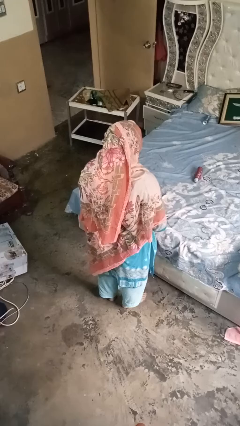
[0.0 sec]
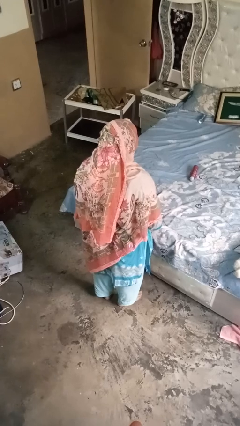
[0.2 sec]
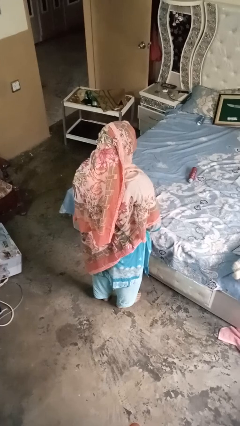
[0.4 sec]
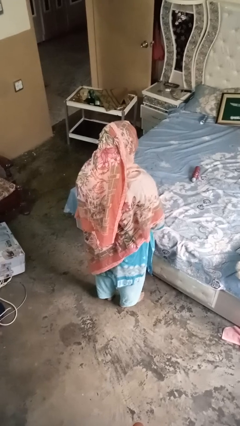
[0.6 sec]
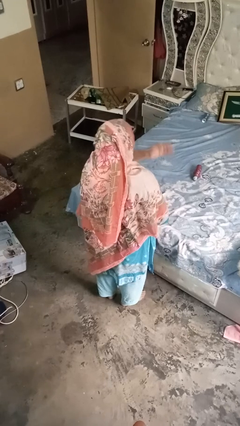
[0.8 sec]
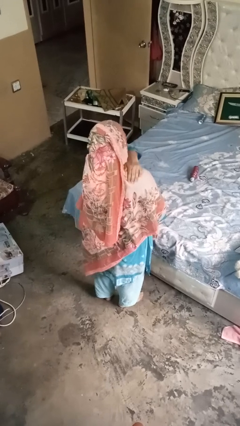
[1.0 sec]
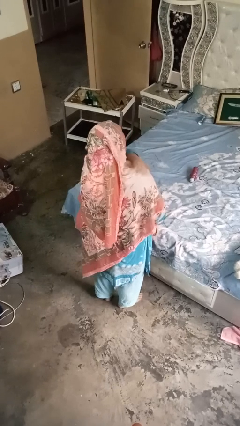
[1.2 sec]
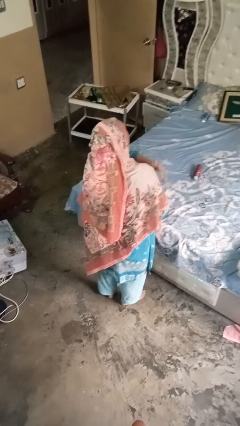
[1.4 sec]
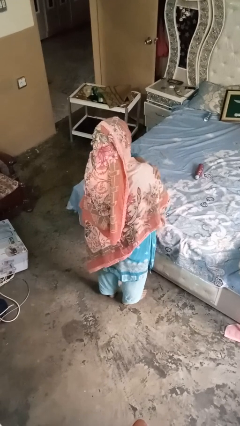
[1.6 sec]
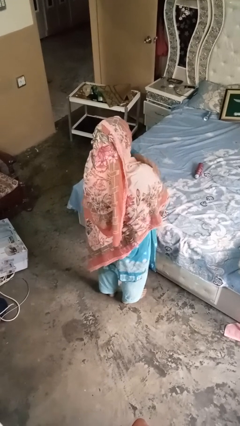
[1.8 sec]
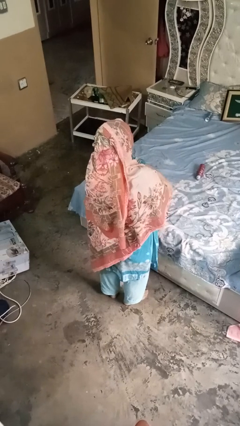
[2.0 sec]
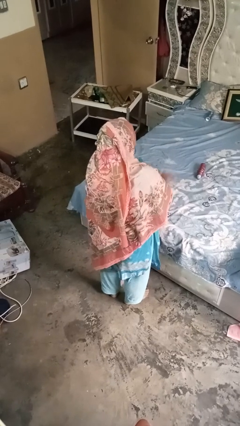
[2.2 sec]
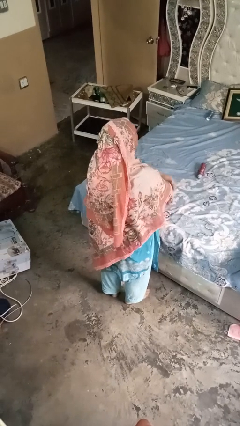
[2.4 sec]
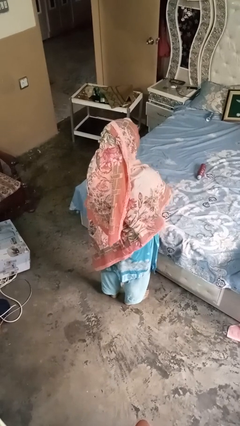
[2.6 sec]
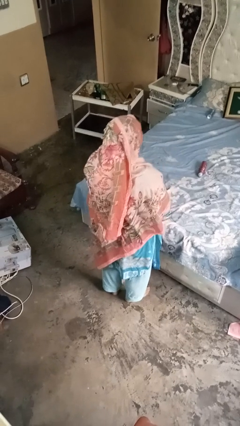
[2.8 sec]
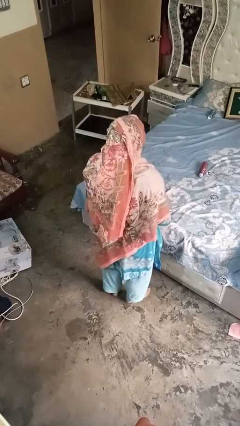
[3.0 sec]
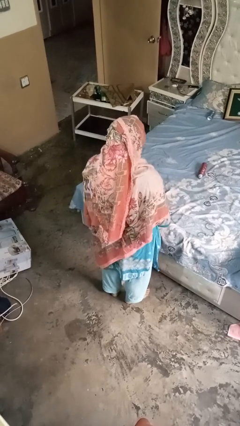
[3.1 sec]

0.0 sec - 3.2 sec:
person swats bug

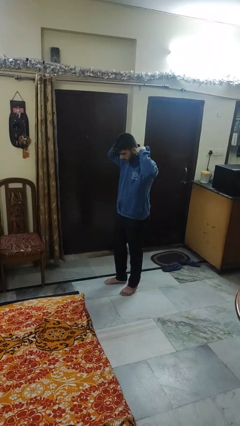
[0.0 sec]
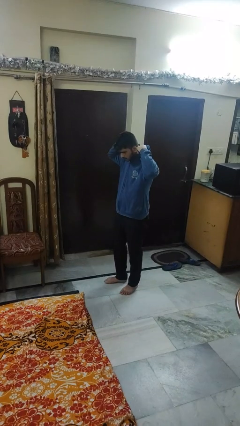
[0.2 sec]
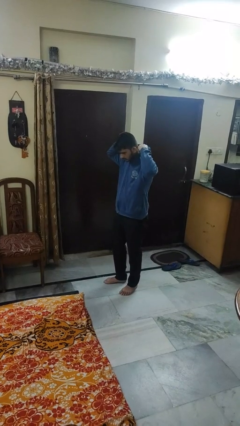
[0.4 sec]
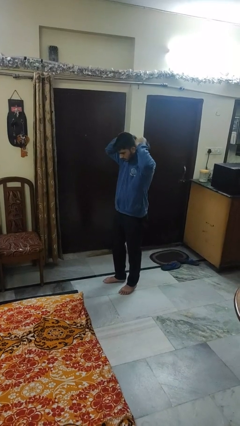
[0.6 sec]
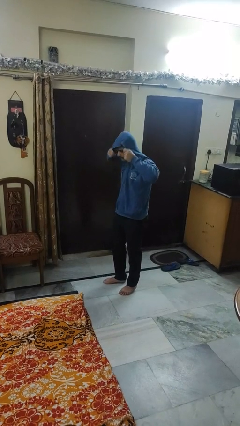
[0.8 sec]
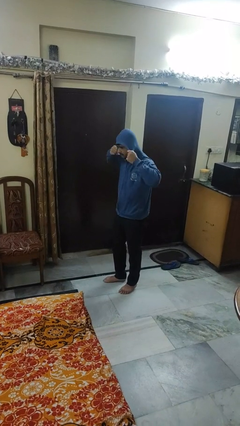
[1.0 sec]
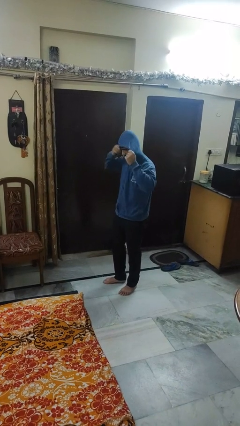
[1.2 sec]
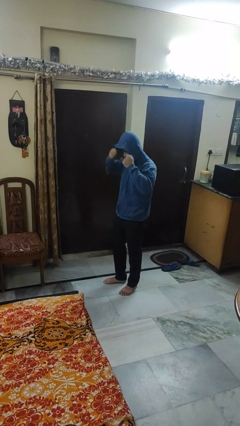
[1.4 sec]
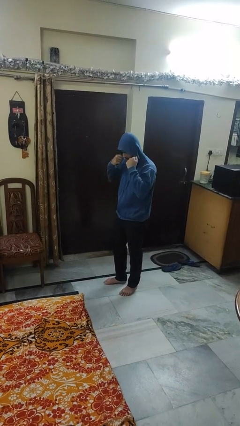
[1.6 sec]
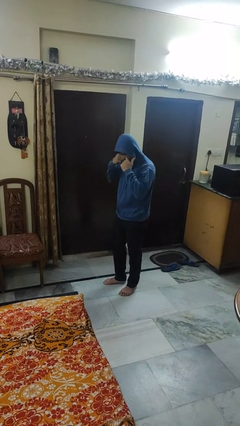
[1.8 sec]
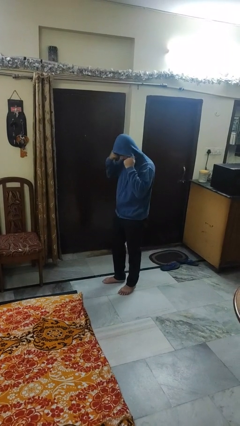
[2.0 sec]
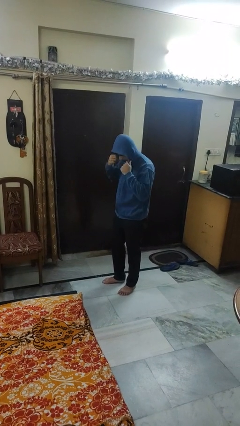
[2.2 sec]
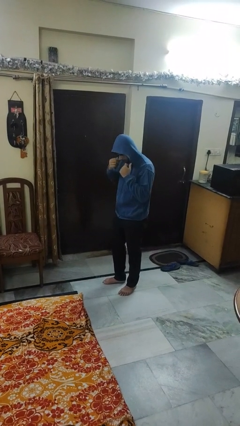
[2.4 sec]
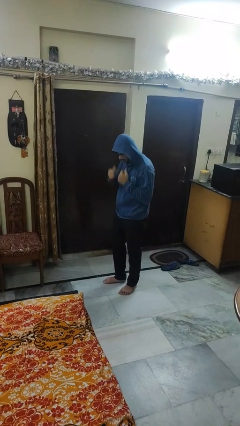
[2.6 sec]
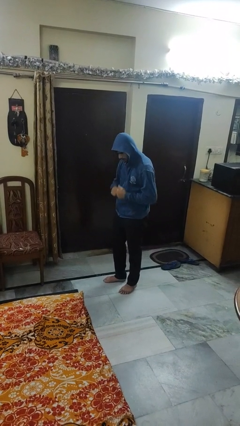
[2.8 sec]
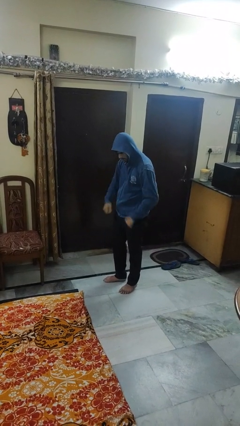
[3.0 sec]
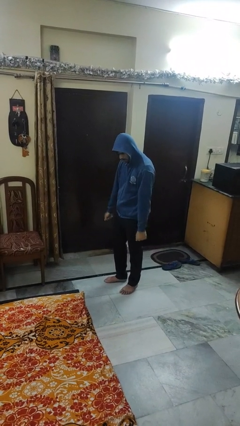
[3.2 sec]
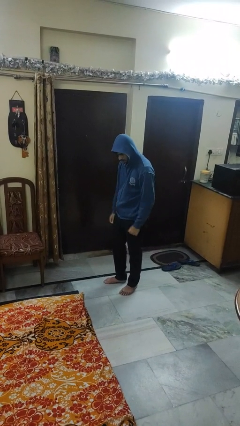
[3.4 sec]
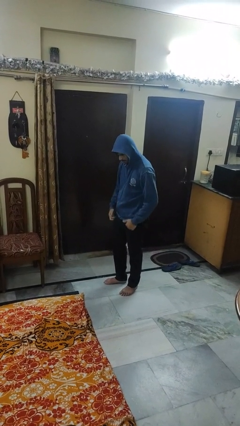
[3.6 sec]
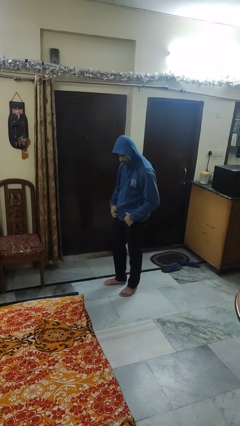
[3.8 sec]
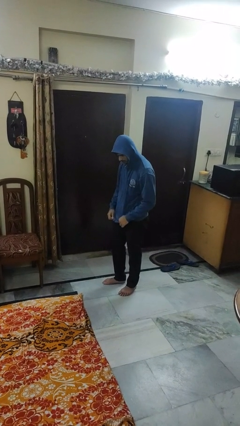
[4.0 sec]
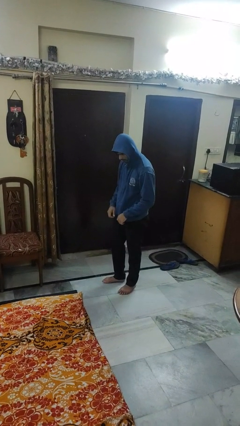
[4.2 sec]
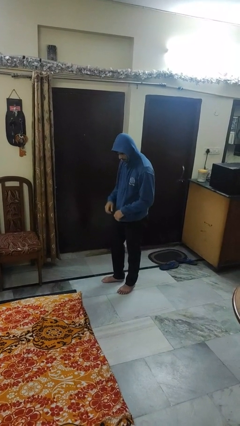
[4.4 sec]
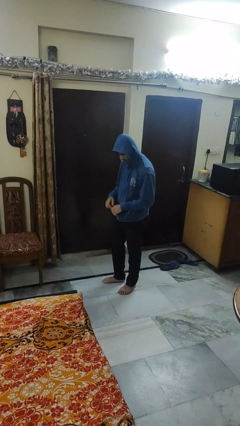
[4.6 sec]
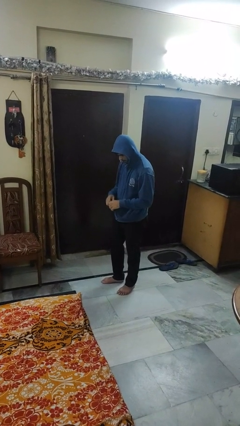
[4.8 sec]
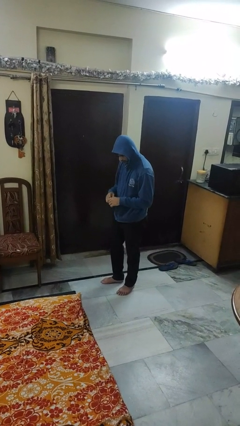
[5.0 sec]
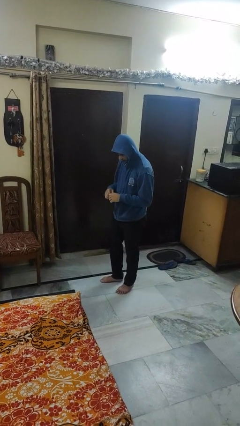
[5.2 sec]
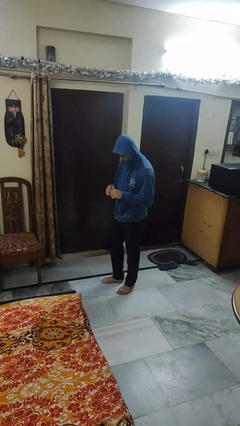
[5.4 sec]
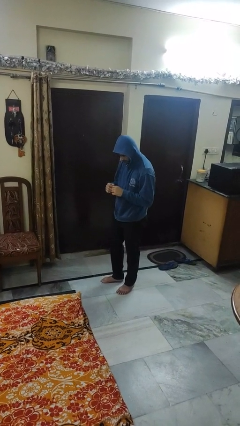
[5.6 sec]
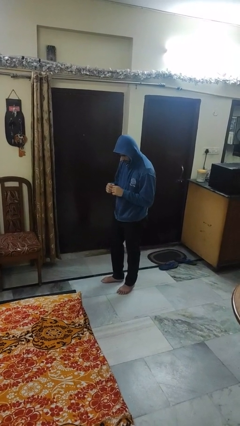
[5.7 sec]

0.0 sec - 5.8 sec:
person puts on hoodie

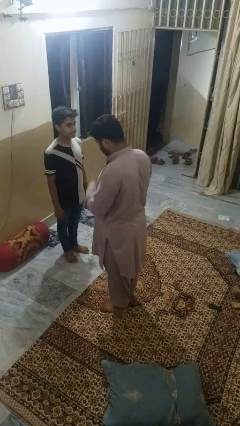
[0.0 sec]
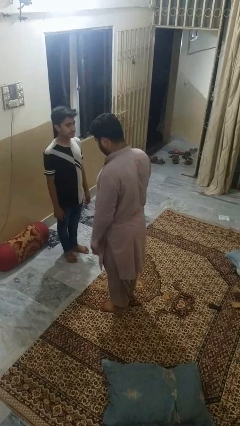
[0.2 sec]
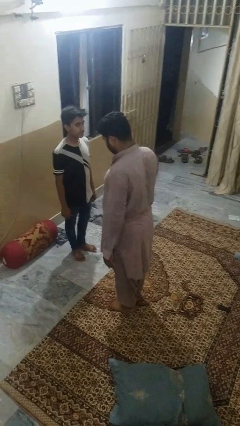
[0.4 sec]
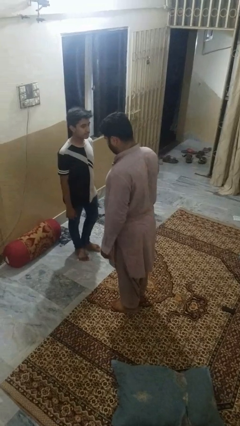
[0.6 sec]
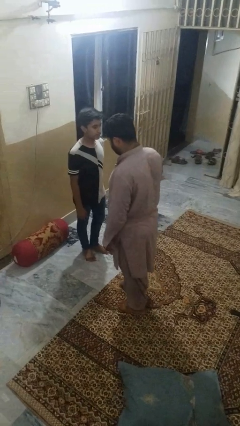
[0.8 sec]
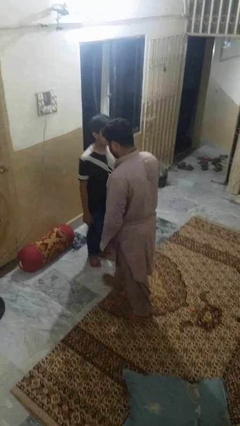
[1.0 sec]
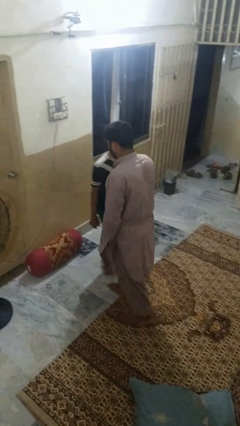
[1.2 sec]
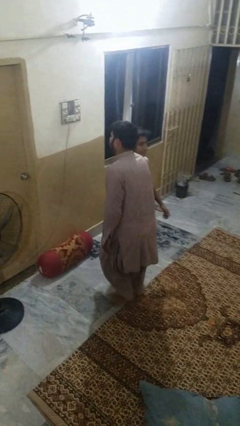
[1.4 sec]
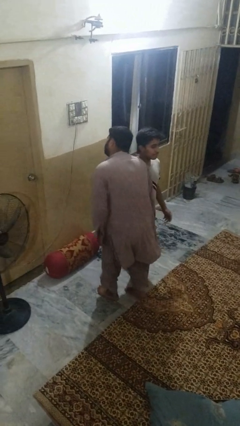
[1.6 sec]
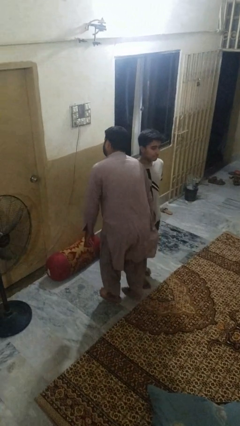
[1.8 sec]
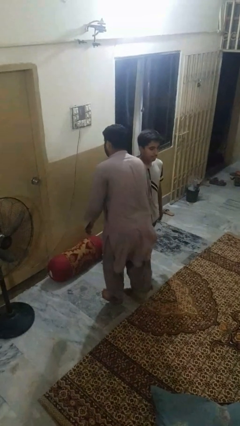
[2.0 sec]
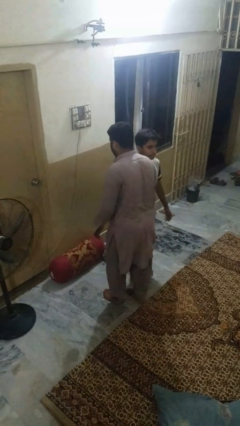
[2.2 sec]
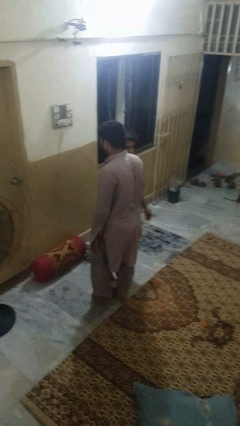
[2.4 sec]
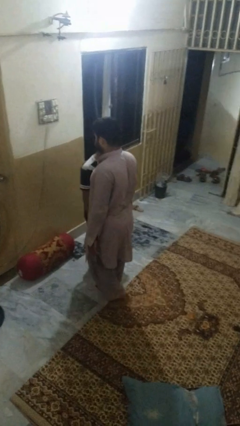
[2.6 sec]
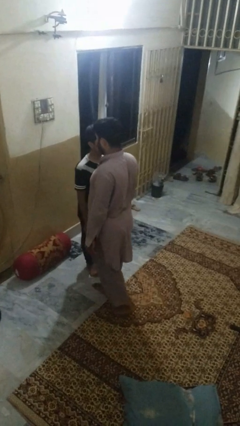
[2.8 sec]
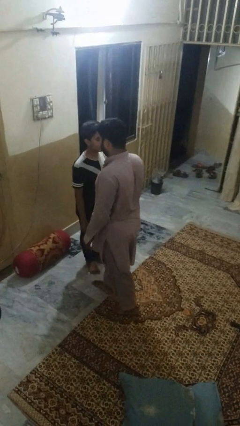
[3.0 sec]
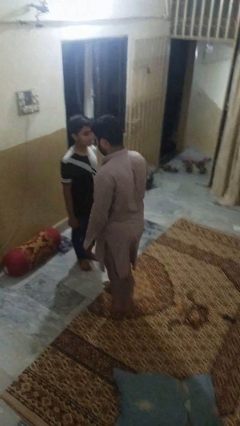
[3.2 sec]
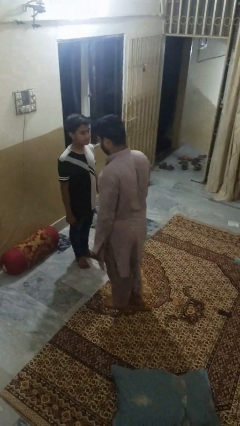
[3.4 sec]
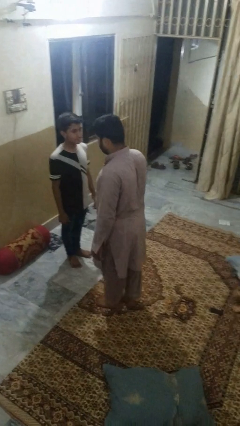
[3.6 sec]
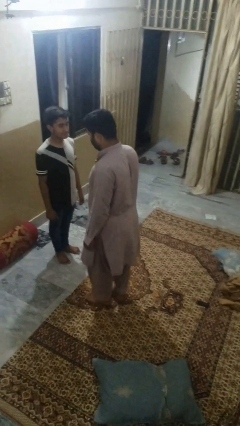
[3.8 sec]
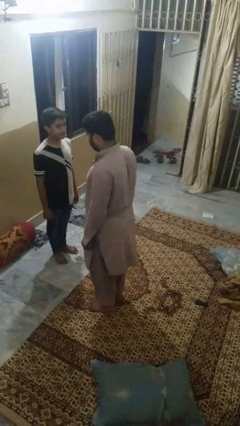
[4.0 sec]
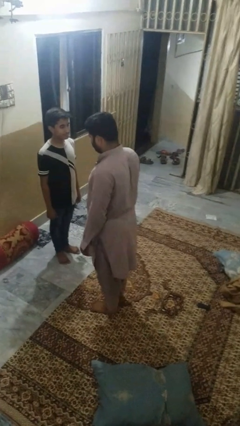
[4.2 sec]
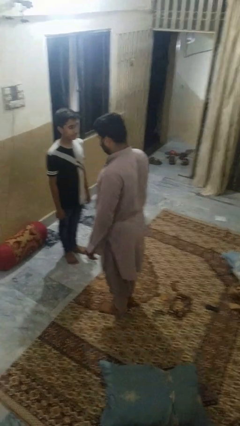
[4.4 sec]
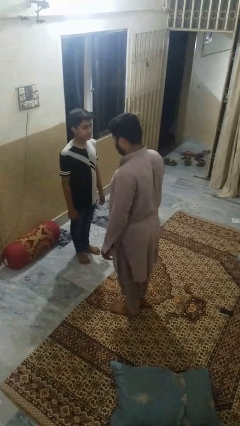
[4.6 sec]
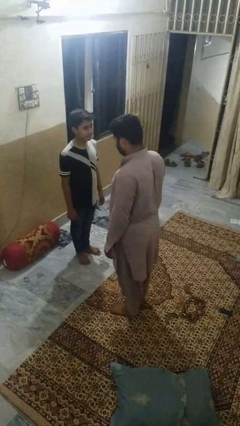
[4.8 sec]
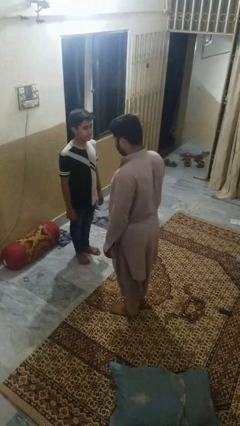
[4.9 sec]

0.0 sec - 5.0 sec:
person bumps into person

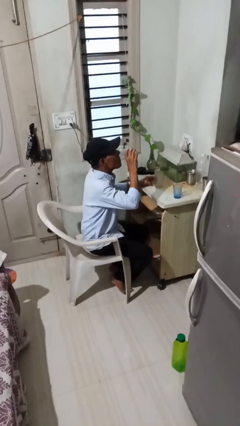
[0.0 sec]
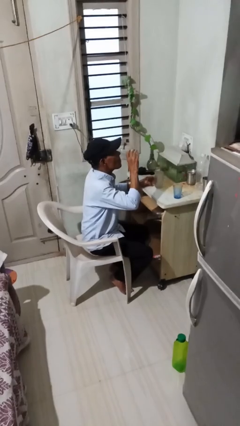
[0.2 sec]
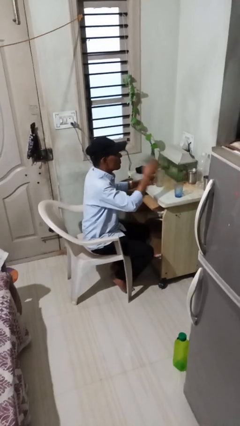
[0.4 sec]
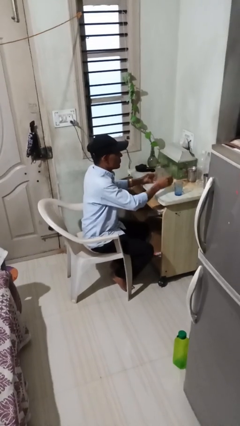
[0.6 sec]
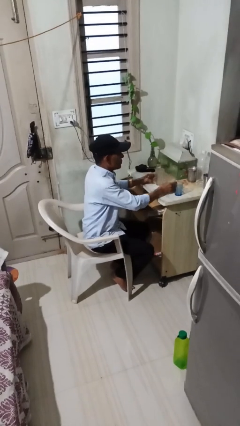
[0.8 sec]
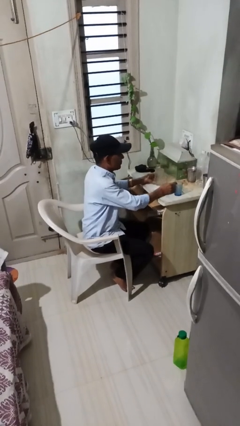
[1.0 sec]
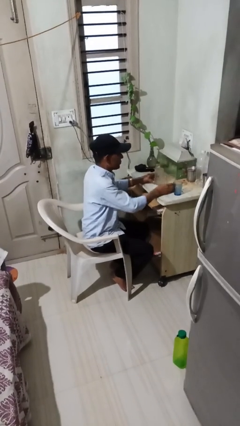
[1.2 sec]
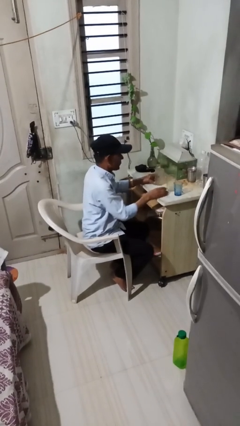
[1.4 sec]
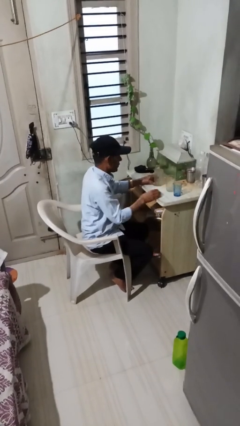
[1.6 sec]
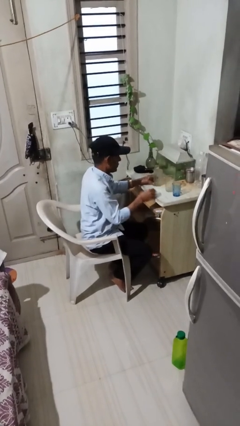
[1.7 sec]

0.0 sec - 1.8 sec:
person puts down object on table

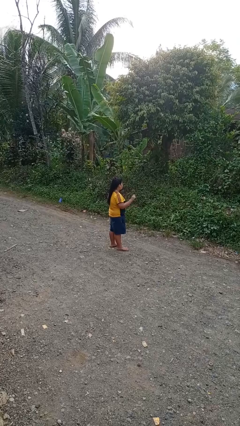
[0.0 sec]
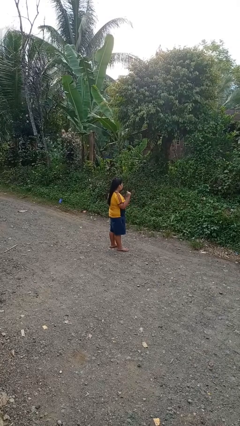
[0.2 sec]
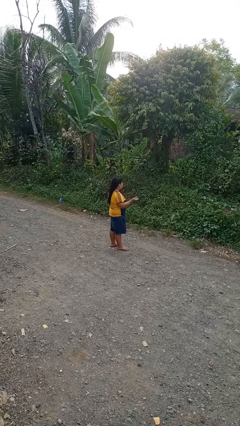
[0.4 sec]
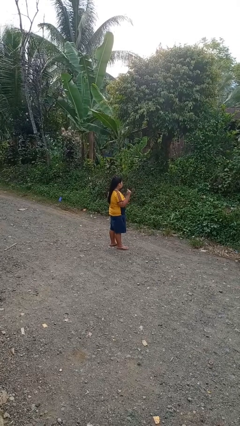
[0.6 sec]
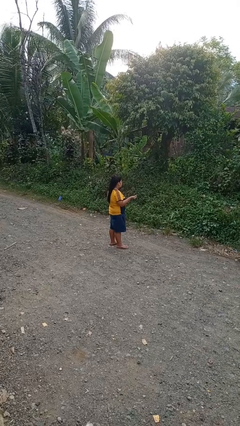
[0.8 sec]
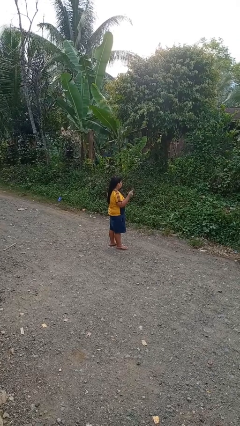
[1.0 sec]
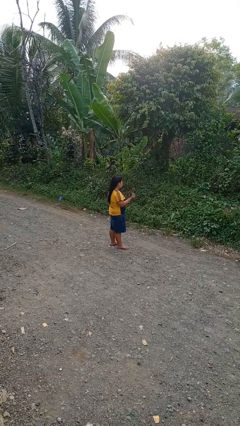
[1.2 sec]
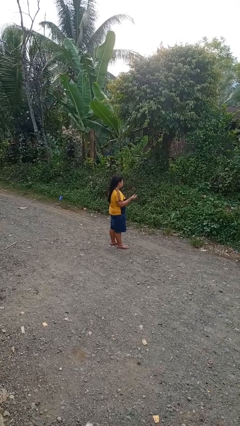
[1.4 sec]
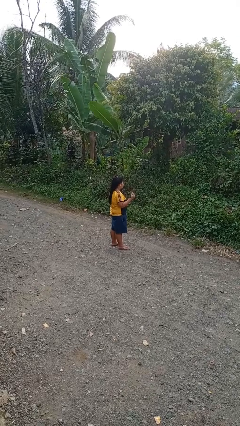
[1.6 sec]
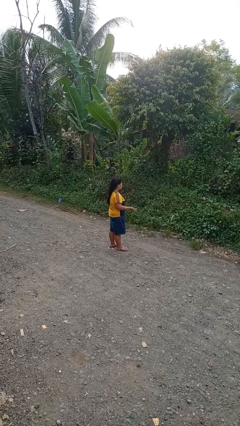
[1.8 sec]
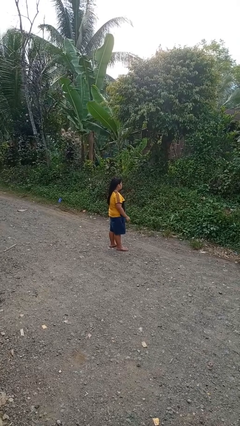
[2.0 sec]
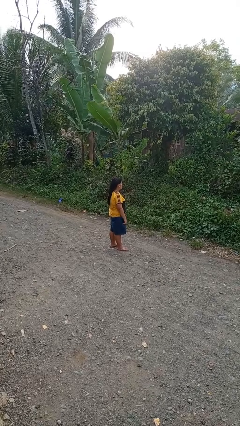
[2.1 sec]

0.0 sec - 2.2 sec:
person snaps fingers
